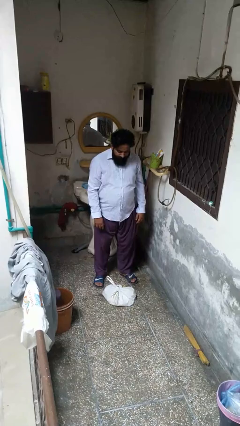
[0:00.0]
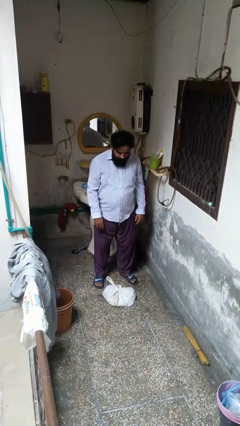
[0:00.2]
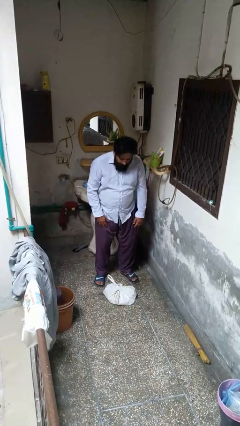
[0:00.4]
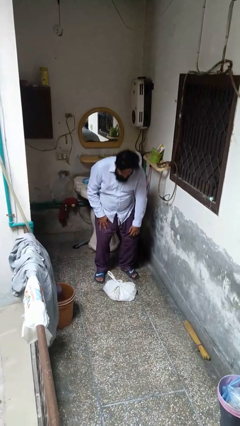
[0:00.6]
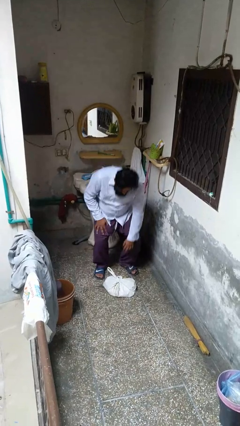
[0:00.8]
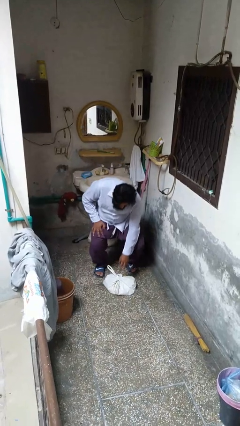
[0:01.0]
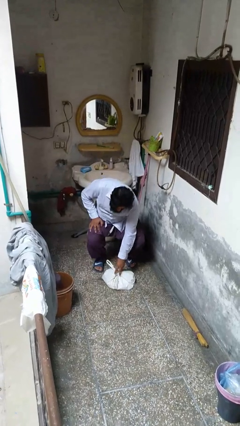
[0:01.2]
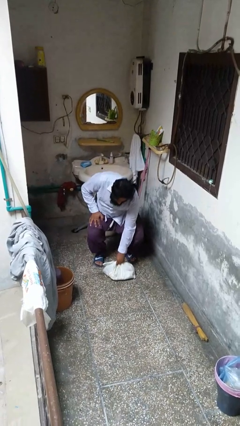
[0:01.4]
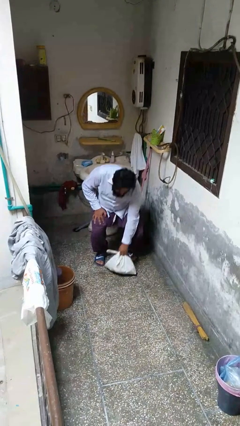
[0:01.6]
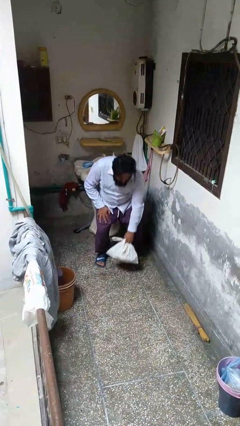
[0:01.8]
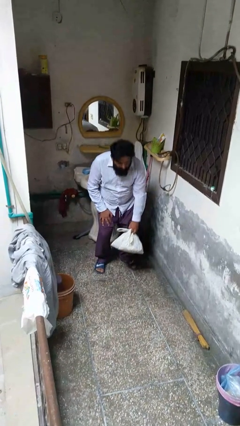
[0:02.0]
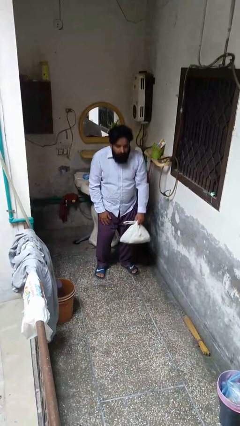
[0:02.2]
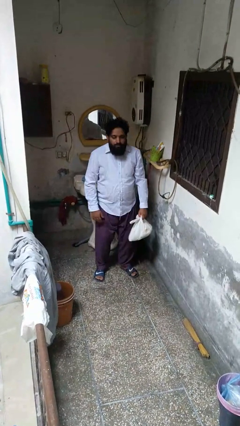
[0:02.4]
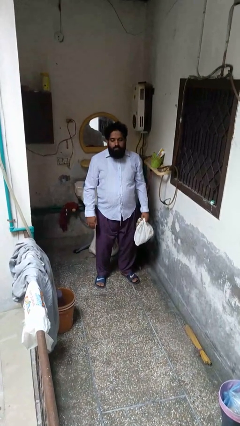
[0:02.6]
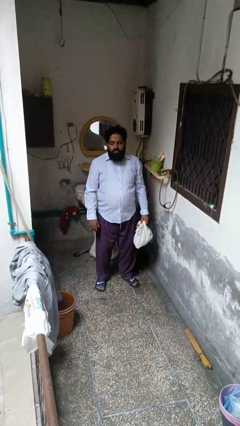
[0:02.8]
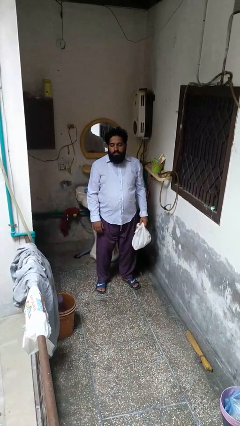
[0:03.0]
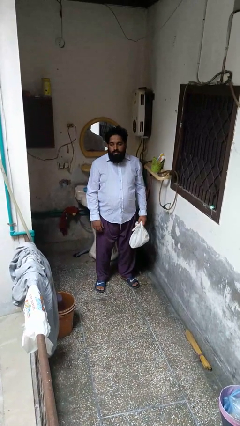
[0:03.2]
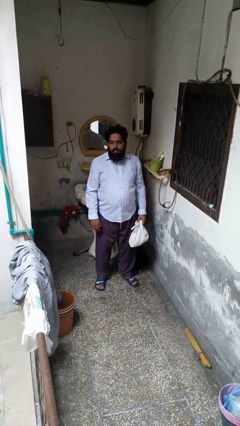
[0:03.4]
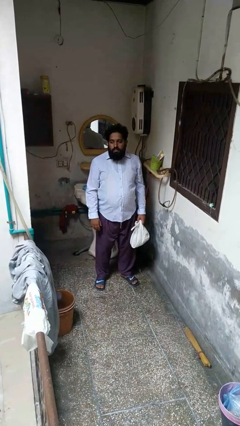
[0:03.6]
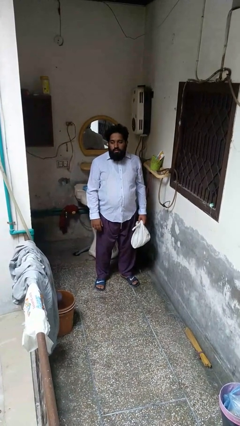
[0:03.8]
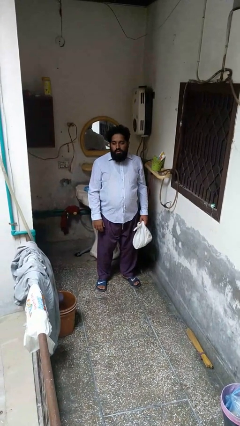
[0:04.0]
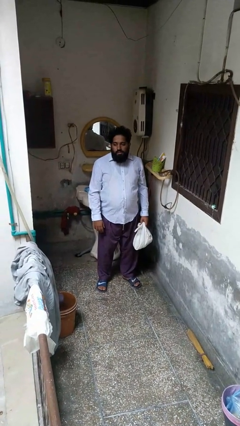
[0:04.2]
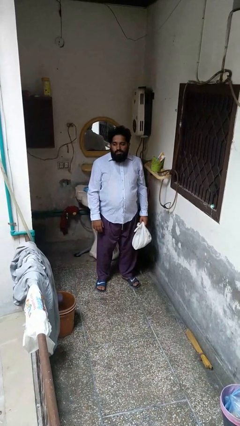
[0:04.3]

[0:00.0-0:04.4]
person picks up object from floor

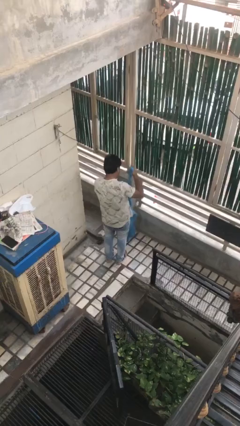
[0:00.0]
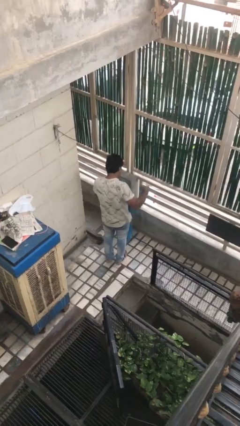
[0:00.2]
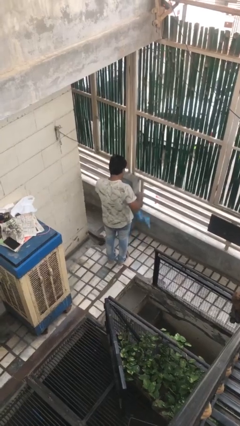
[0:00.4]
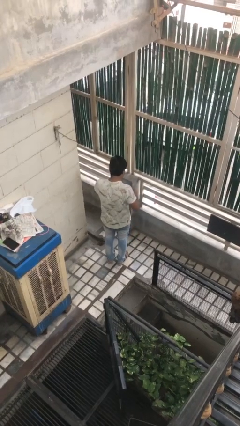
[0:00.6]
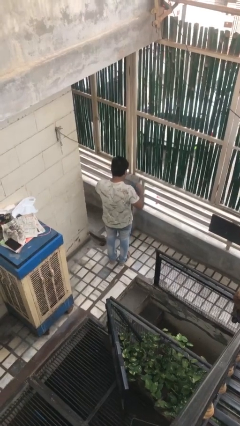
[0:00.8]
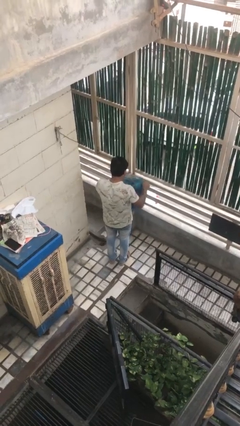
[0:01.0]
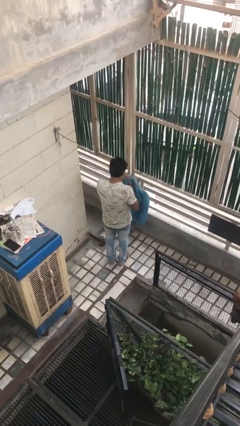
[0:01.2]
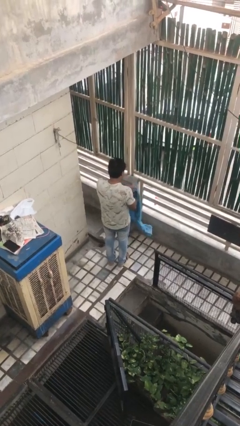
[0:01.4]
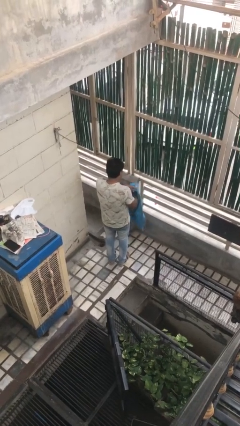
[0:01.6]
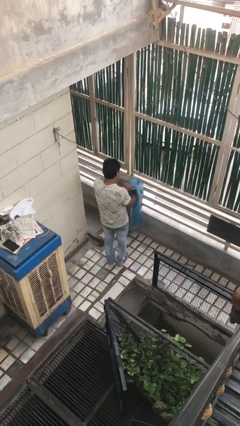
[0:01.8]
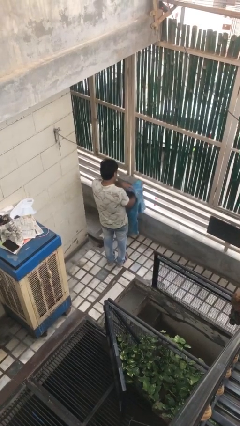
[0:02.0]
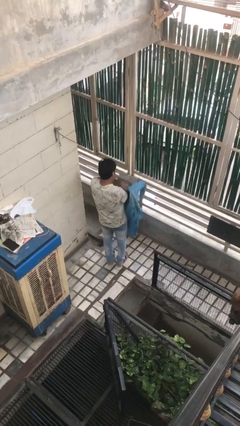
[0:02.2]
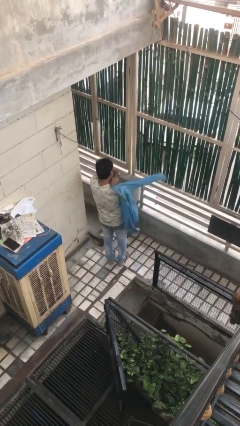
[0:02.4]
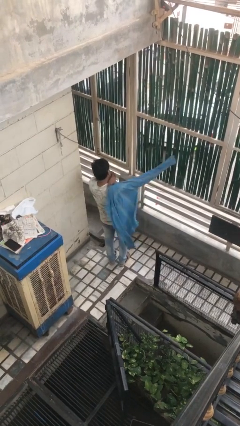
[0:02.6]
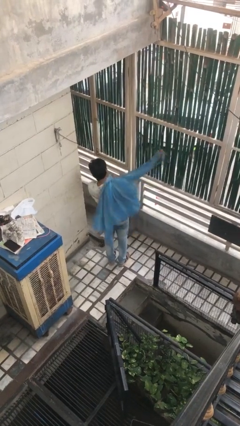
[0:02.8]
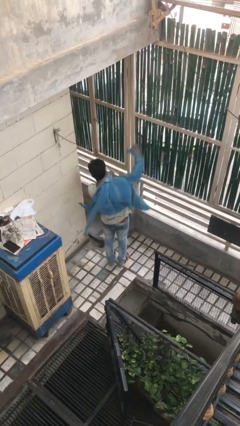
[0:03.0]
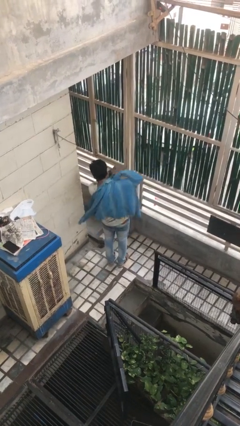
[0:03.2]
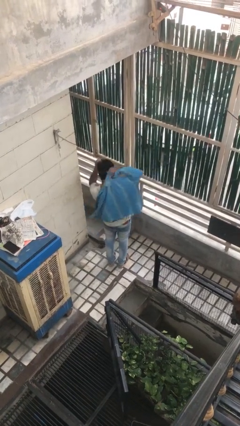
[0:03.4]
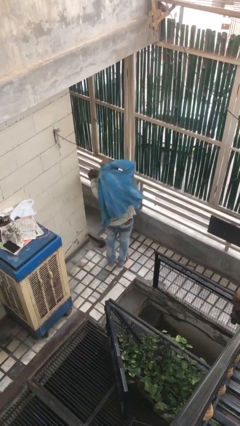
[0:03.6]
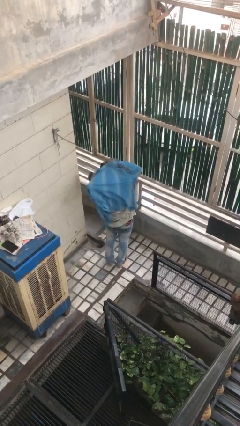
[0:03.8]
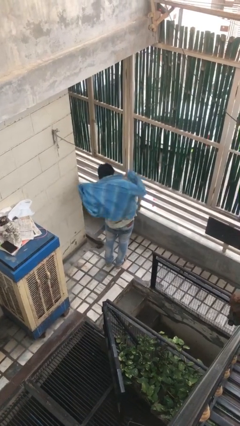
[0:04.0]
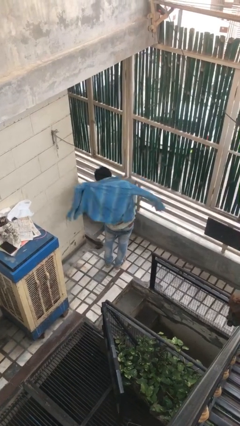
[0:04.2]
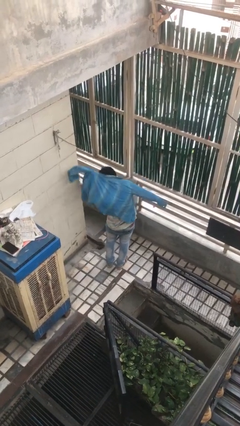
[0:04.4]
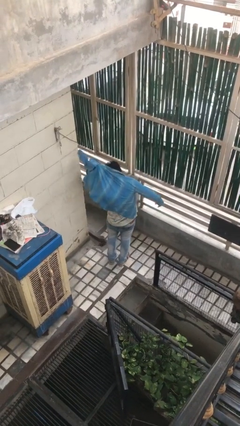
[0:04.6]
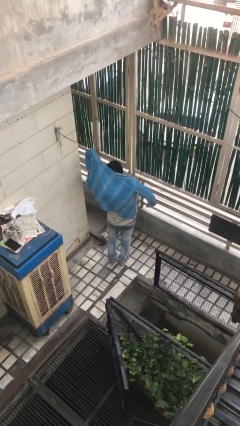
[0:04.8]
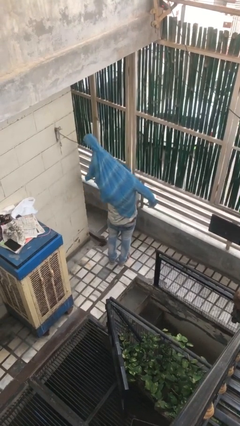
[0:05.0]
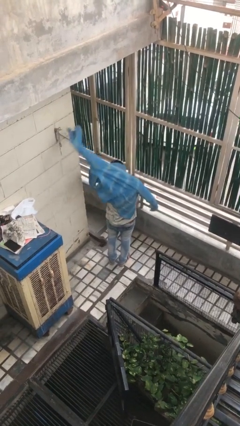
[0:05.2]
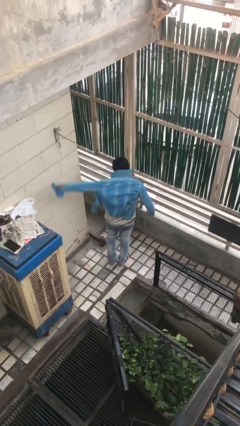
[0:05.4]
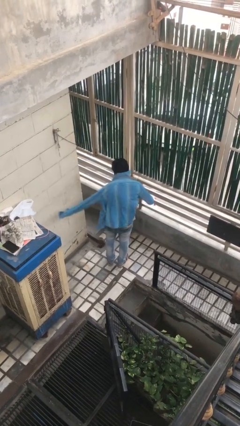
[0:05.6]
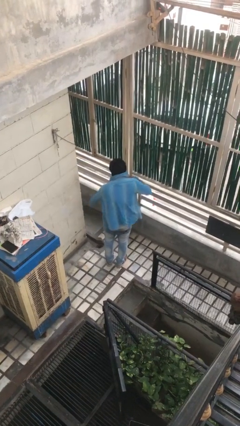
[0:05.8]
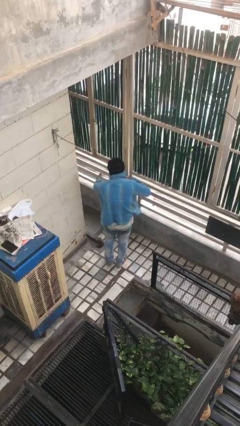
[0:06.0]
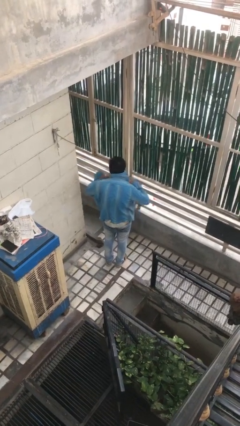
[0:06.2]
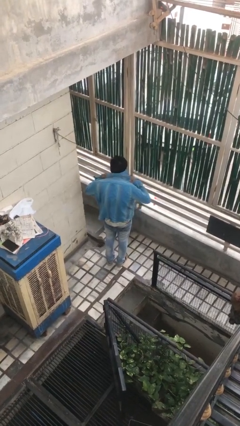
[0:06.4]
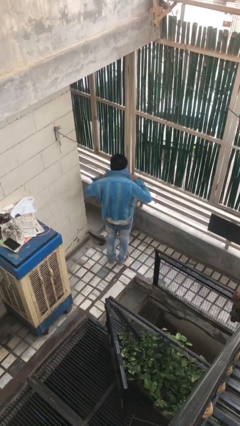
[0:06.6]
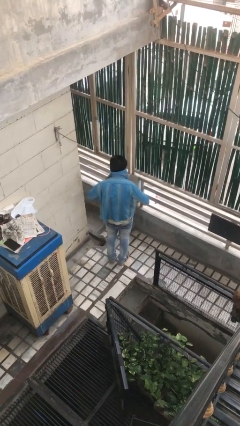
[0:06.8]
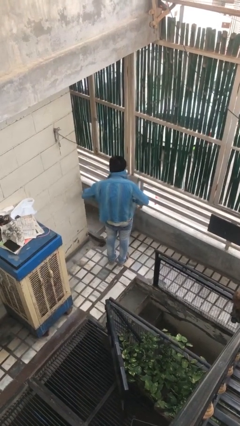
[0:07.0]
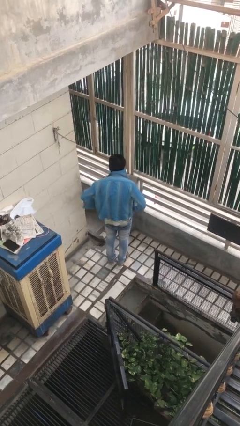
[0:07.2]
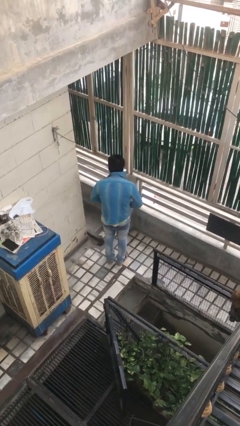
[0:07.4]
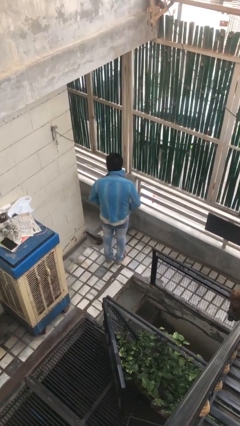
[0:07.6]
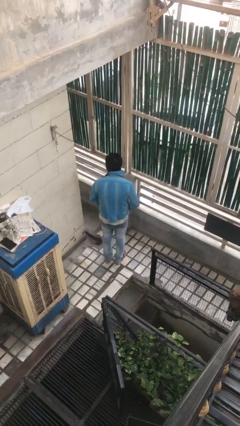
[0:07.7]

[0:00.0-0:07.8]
person puts on shirt

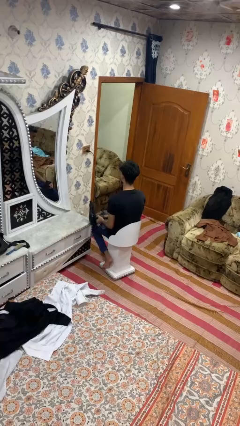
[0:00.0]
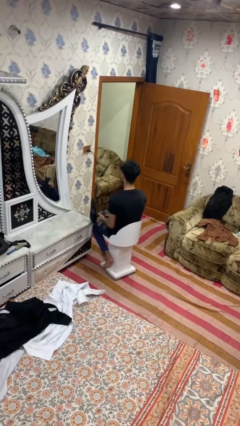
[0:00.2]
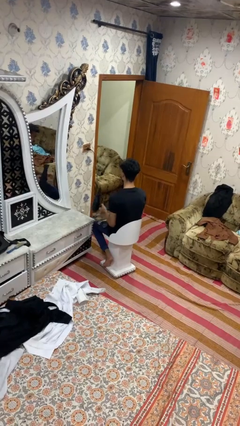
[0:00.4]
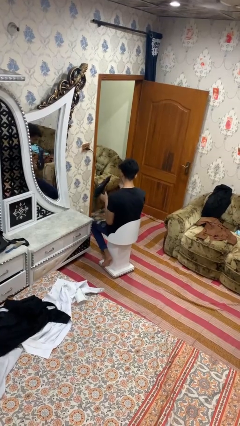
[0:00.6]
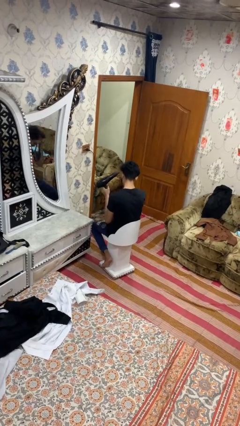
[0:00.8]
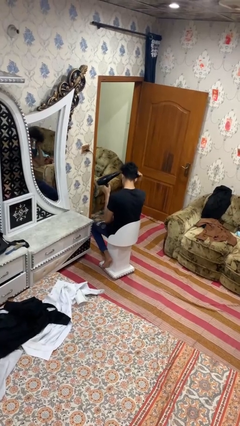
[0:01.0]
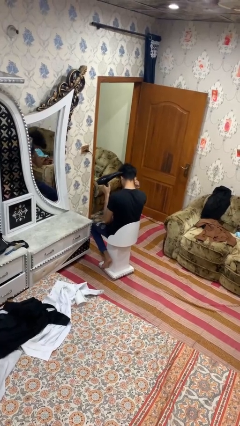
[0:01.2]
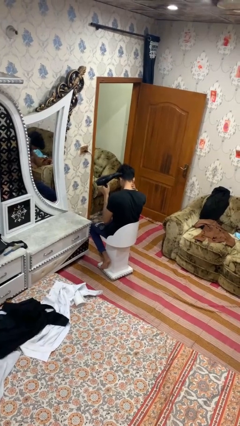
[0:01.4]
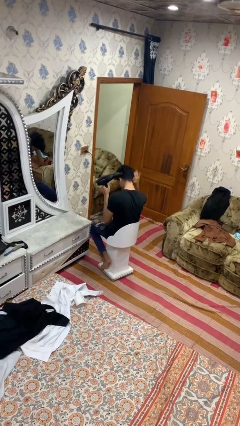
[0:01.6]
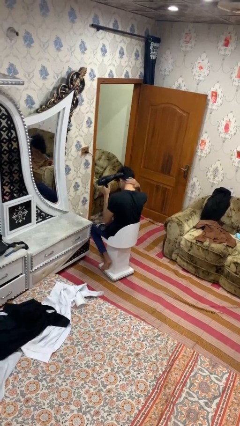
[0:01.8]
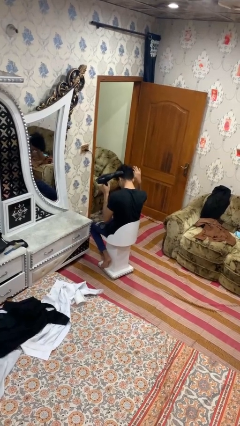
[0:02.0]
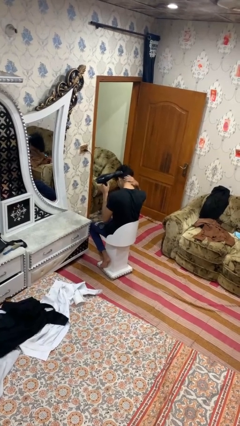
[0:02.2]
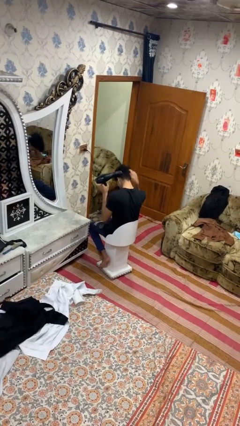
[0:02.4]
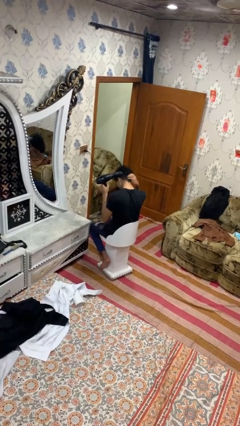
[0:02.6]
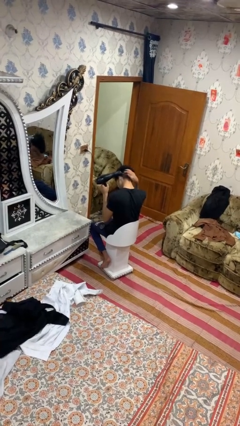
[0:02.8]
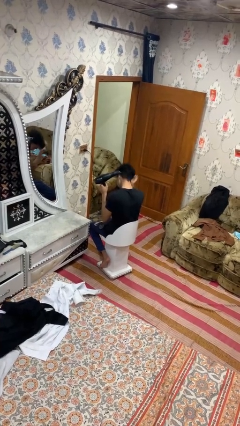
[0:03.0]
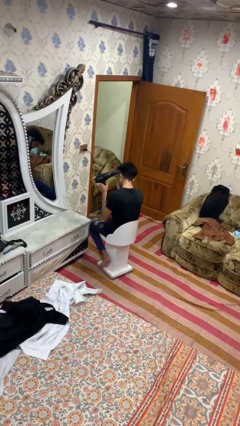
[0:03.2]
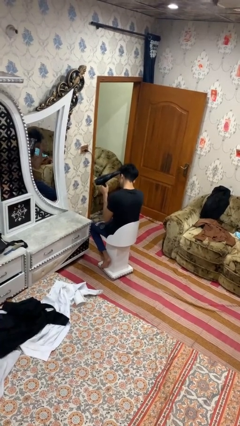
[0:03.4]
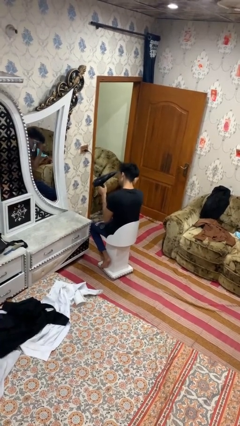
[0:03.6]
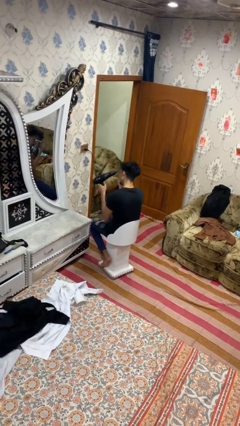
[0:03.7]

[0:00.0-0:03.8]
person dries hair with hairdryer

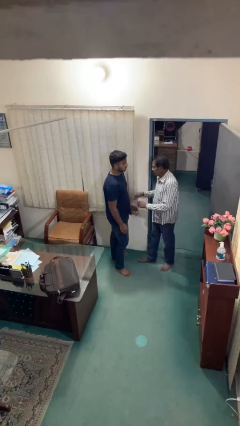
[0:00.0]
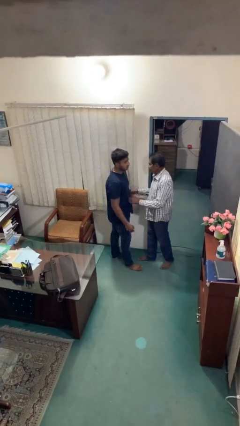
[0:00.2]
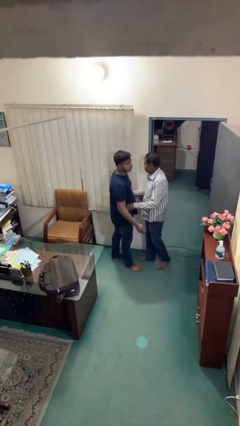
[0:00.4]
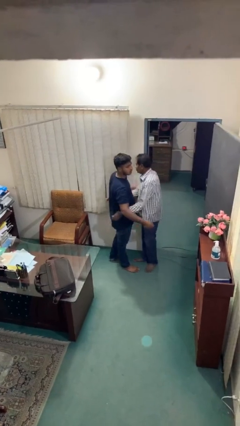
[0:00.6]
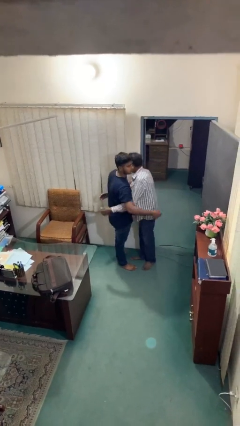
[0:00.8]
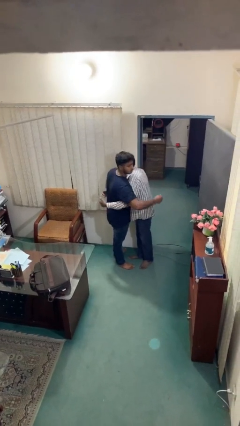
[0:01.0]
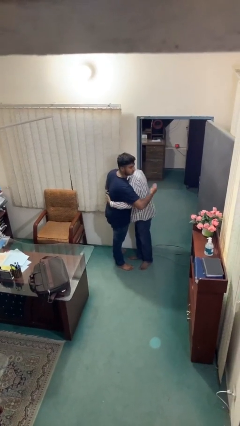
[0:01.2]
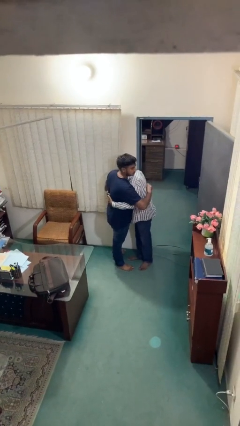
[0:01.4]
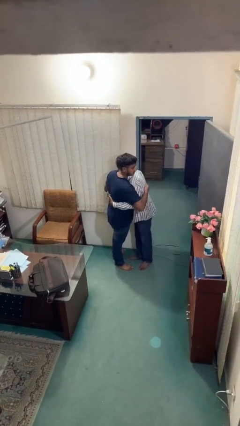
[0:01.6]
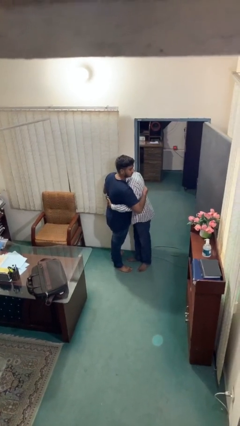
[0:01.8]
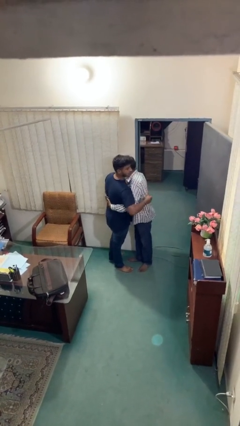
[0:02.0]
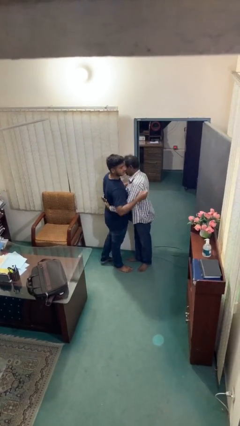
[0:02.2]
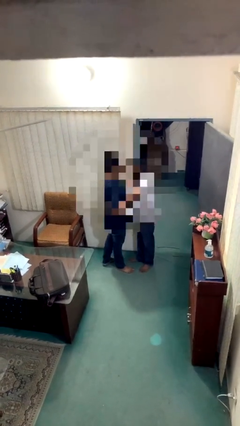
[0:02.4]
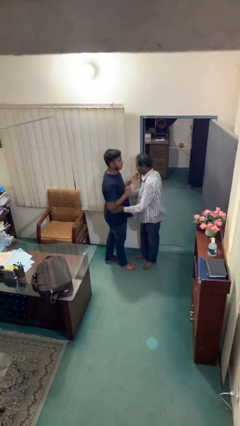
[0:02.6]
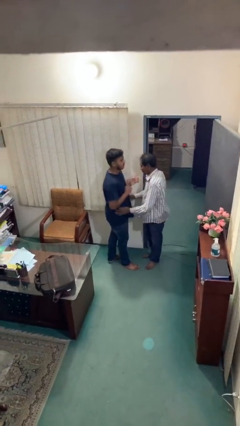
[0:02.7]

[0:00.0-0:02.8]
person embraces person
